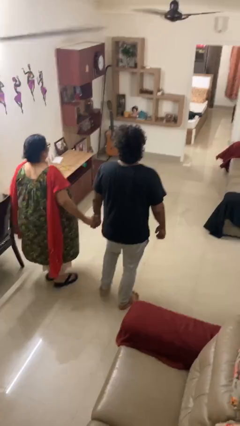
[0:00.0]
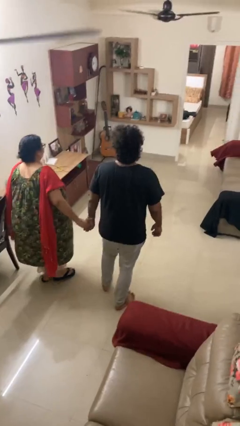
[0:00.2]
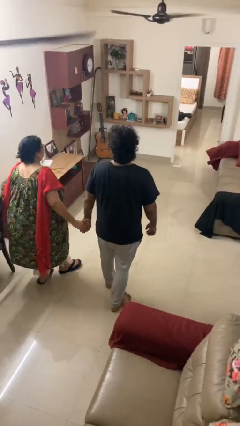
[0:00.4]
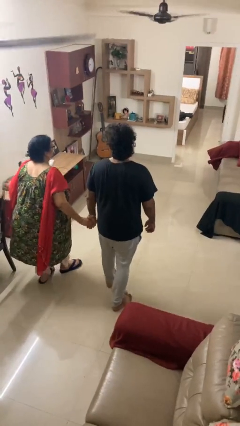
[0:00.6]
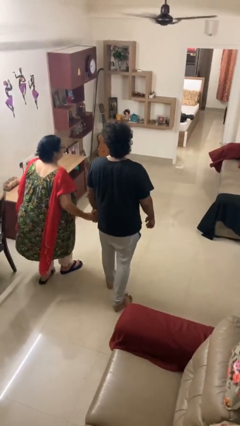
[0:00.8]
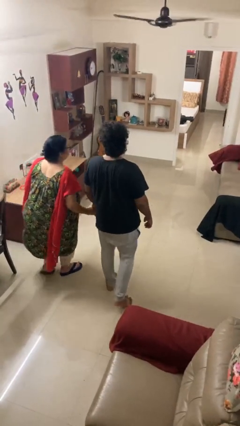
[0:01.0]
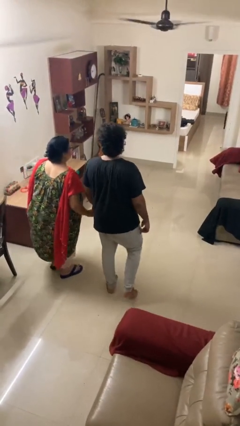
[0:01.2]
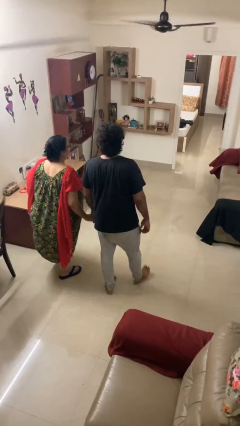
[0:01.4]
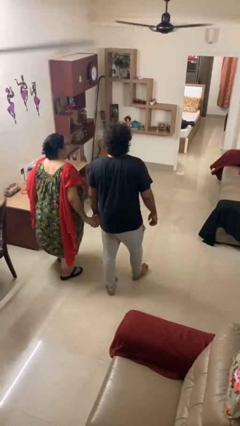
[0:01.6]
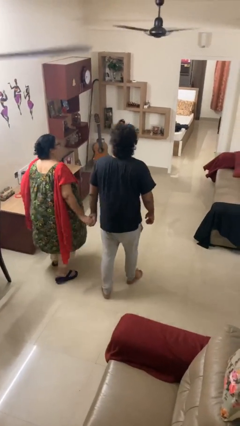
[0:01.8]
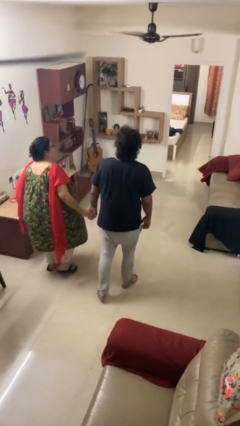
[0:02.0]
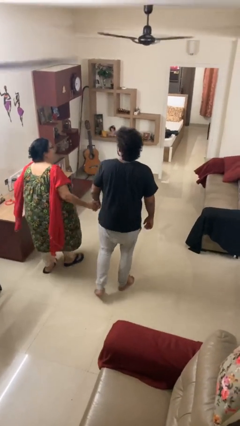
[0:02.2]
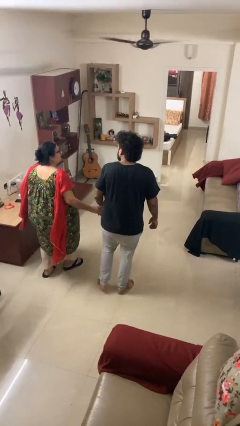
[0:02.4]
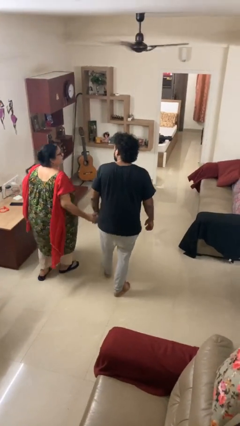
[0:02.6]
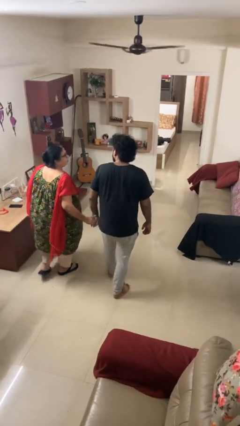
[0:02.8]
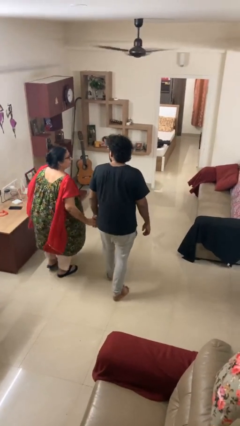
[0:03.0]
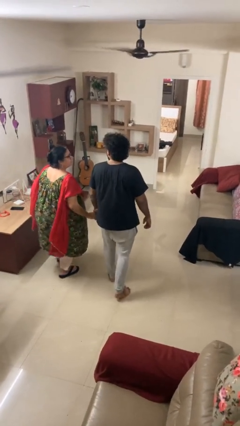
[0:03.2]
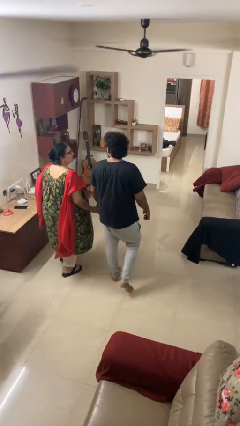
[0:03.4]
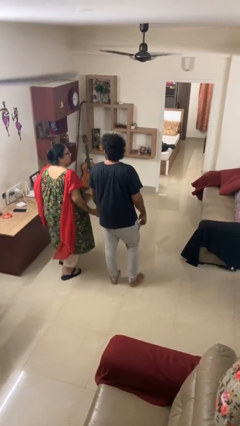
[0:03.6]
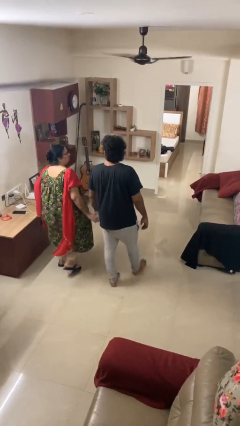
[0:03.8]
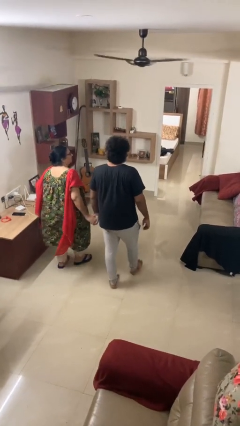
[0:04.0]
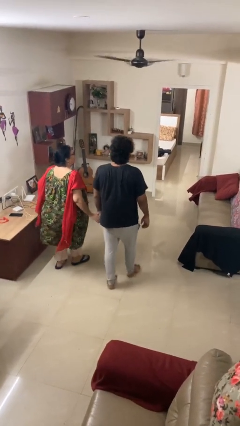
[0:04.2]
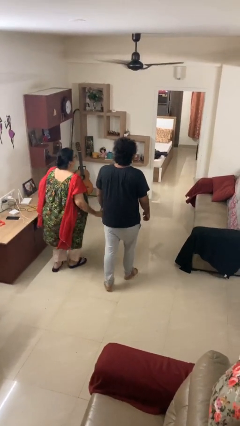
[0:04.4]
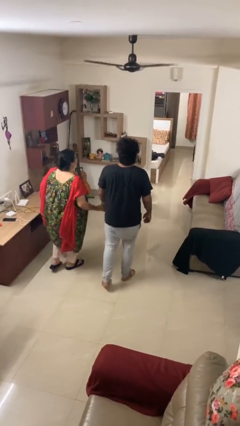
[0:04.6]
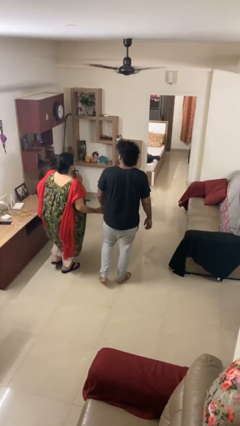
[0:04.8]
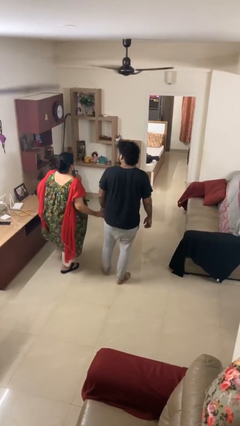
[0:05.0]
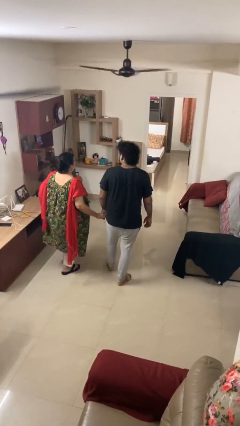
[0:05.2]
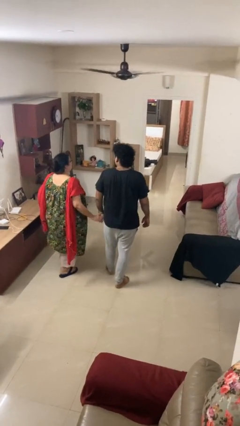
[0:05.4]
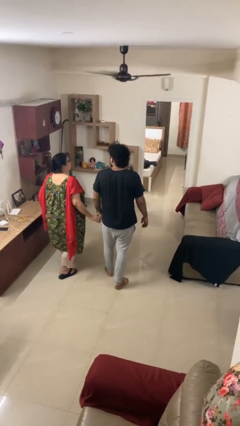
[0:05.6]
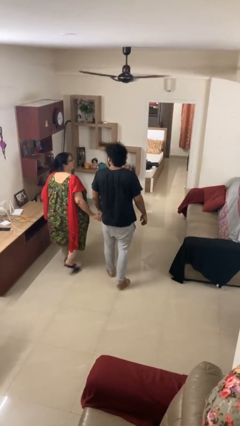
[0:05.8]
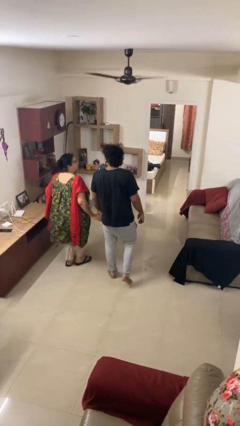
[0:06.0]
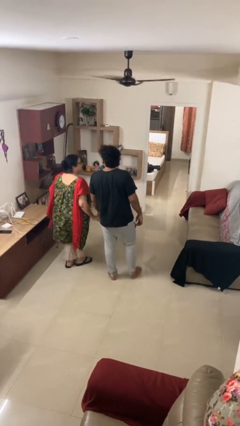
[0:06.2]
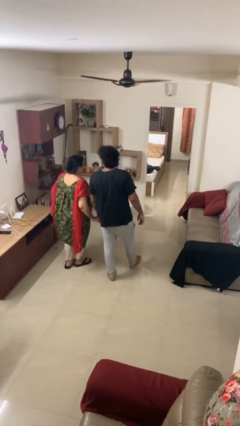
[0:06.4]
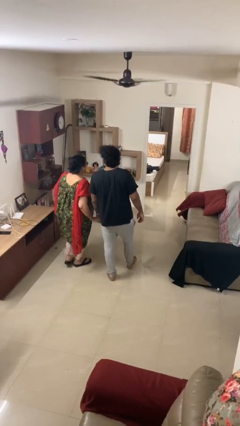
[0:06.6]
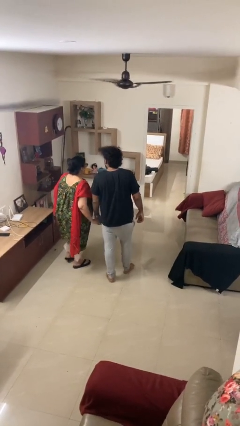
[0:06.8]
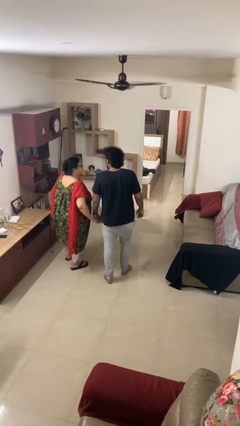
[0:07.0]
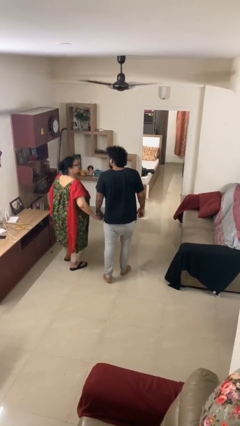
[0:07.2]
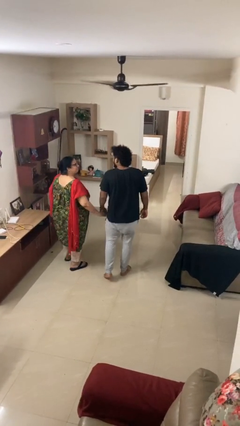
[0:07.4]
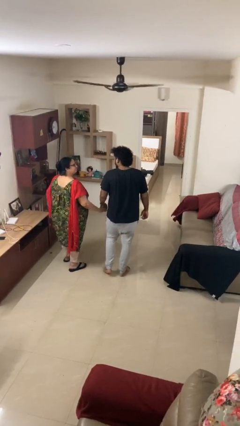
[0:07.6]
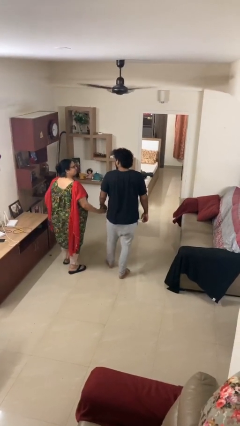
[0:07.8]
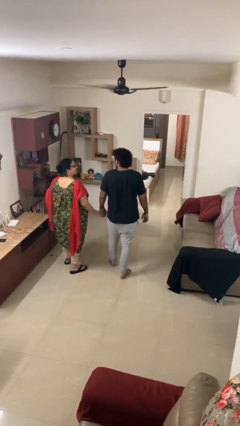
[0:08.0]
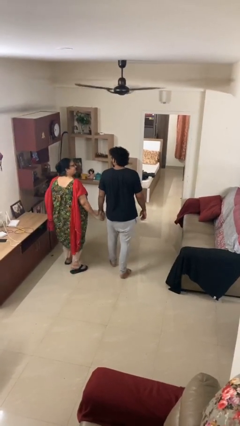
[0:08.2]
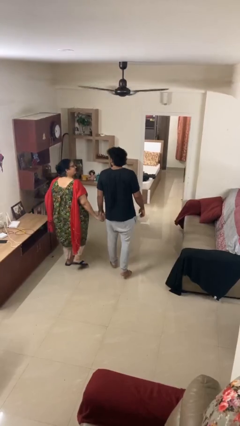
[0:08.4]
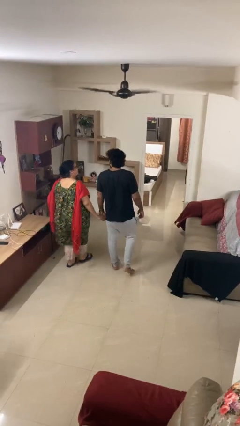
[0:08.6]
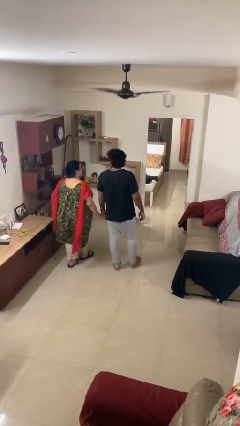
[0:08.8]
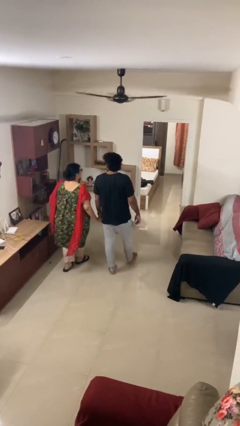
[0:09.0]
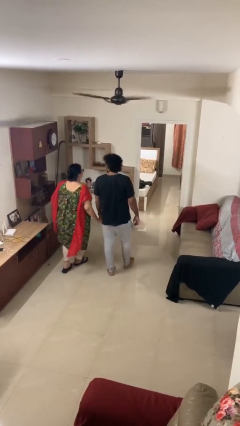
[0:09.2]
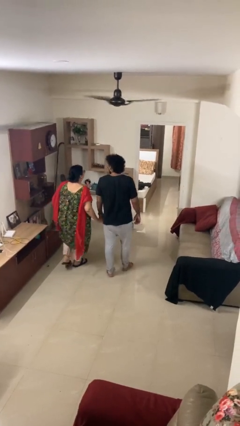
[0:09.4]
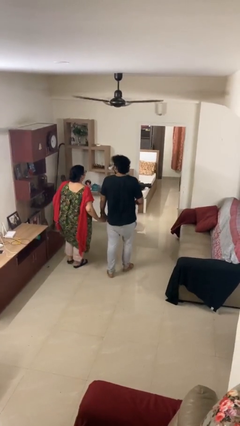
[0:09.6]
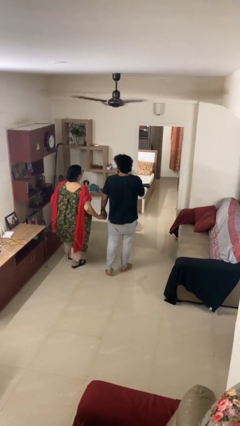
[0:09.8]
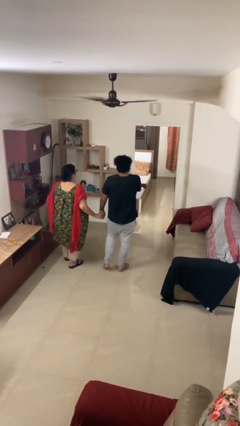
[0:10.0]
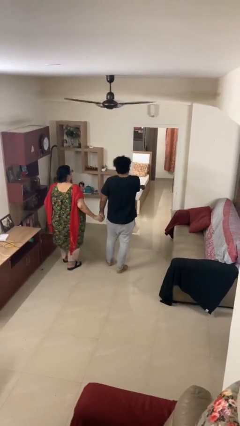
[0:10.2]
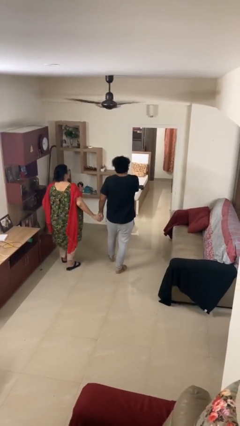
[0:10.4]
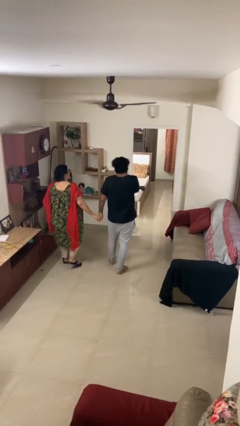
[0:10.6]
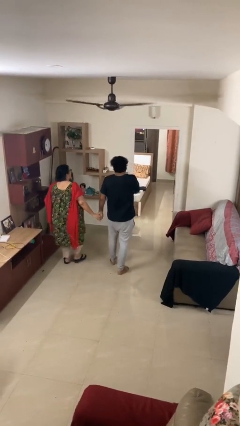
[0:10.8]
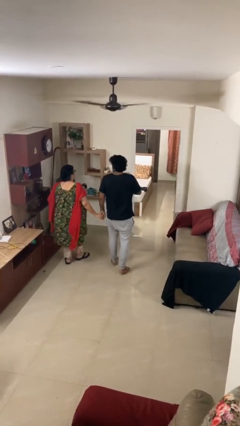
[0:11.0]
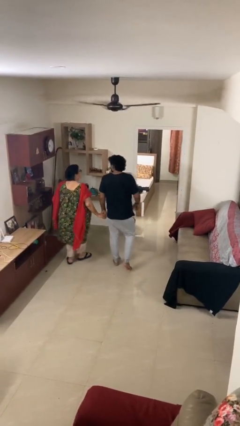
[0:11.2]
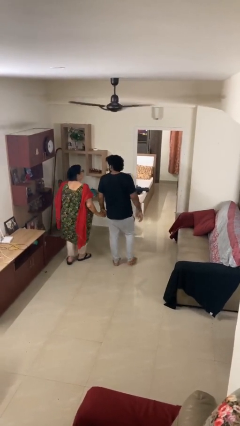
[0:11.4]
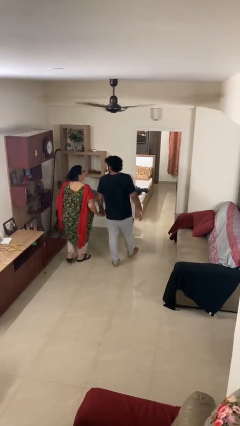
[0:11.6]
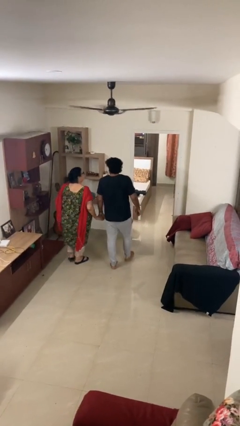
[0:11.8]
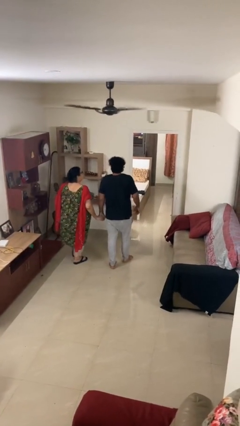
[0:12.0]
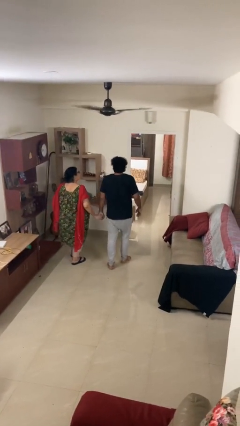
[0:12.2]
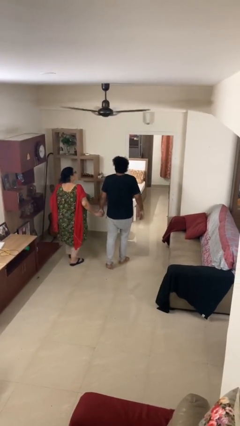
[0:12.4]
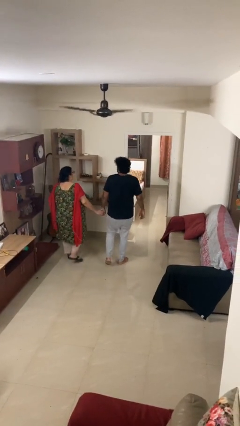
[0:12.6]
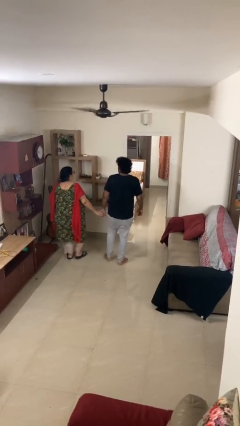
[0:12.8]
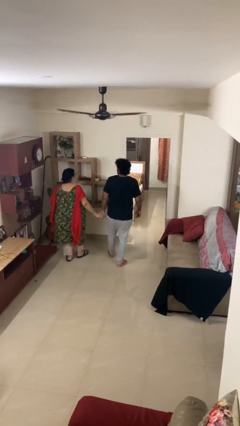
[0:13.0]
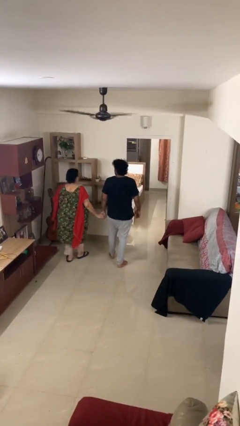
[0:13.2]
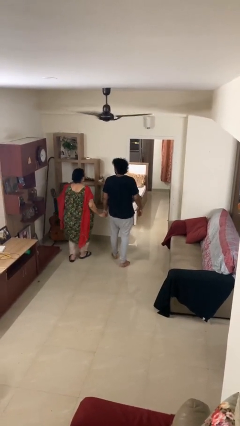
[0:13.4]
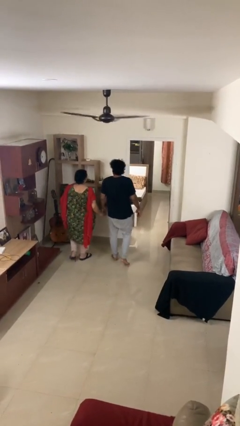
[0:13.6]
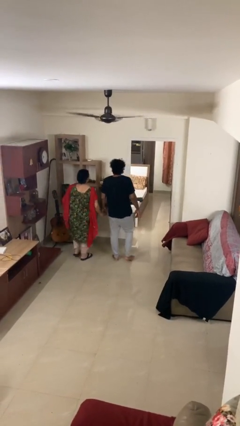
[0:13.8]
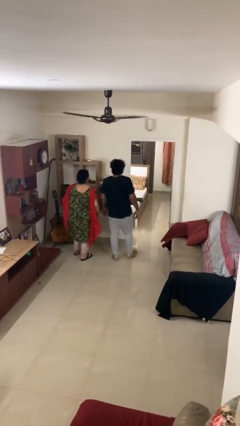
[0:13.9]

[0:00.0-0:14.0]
person holds hand

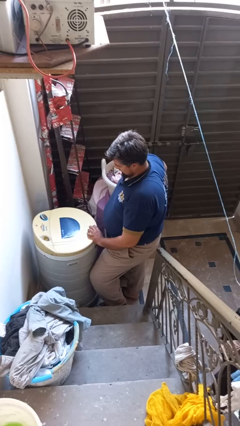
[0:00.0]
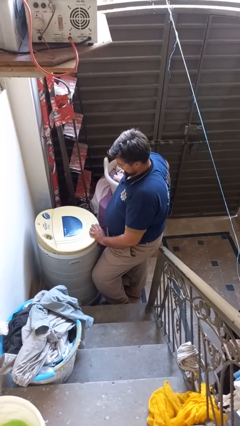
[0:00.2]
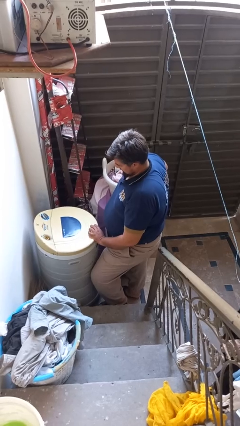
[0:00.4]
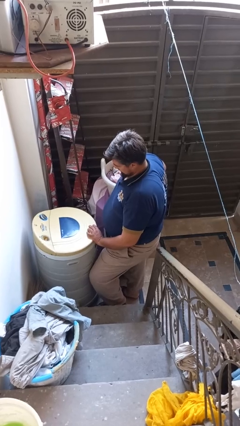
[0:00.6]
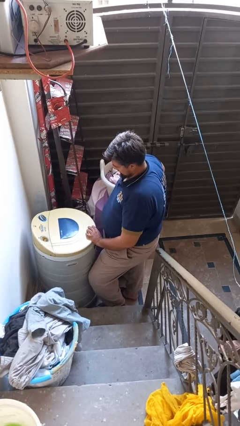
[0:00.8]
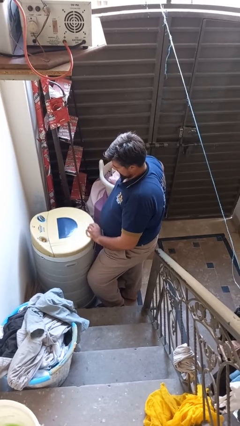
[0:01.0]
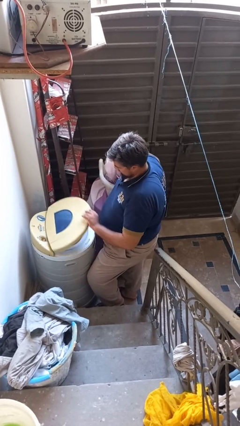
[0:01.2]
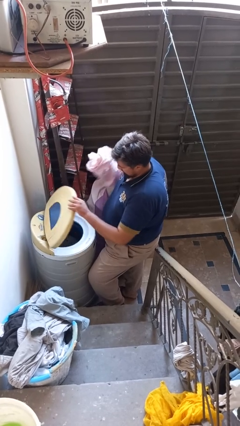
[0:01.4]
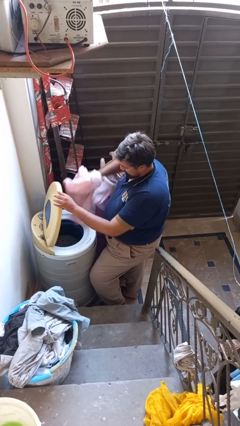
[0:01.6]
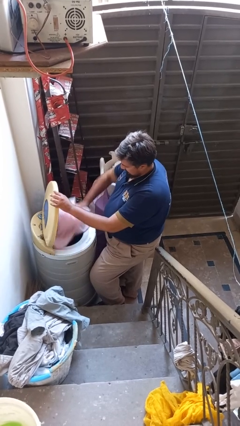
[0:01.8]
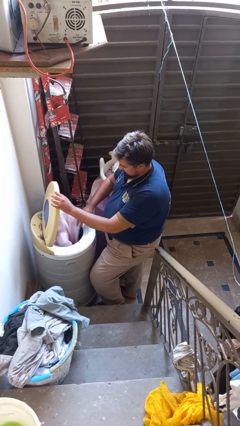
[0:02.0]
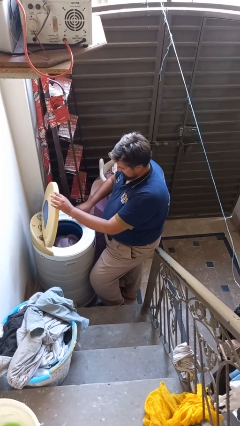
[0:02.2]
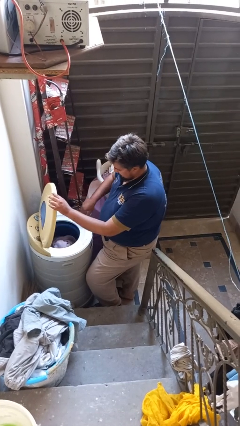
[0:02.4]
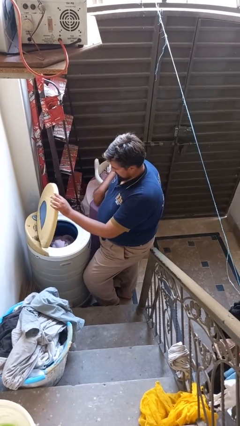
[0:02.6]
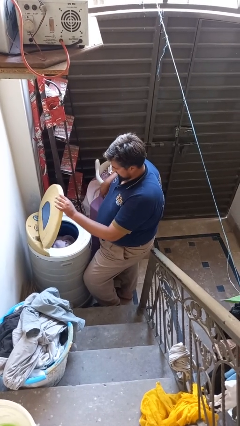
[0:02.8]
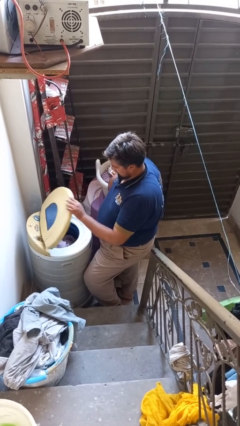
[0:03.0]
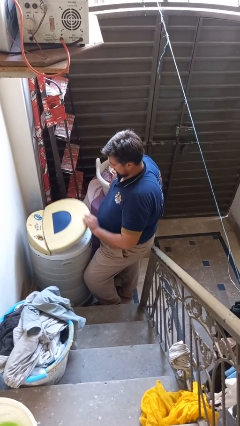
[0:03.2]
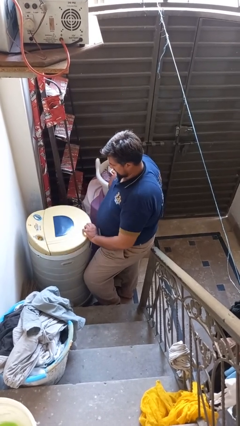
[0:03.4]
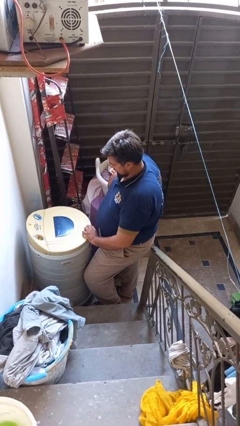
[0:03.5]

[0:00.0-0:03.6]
person loads dryer

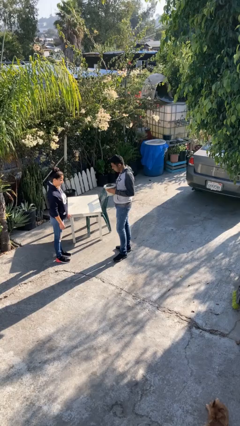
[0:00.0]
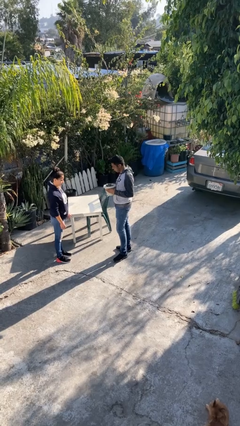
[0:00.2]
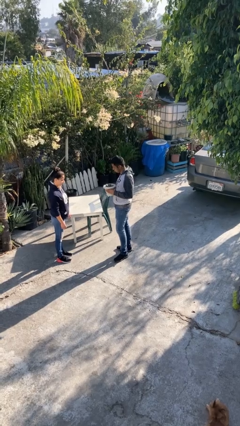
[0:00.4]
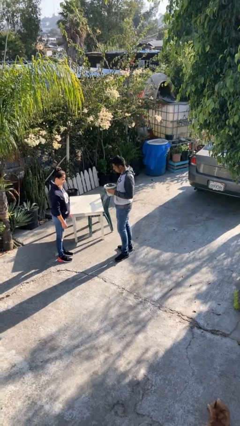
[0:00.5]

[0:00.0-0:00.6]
person transfers object to person

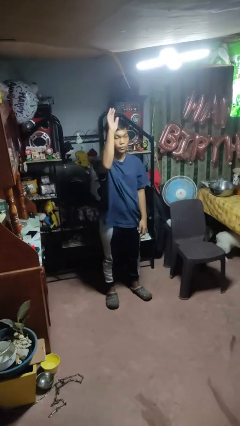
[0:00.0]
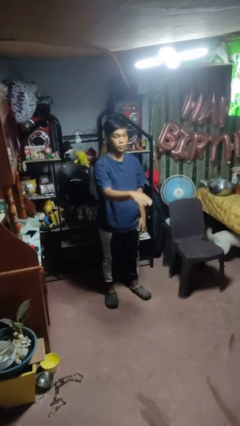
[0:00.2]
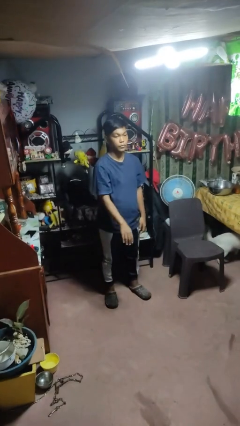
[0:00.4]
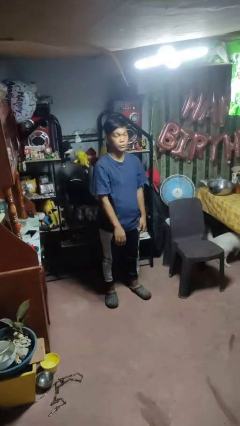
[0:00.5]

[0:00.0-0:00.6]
person gestures swipe down
